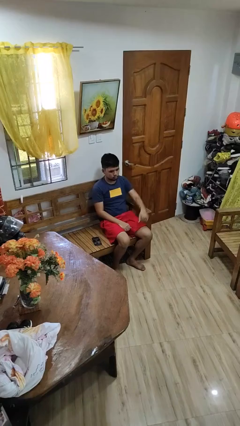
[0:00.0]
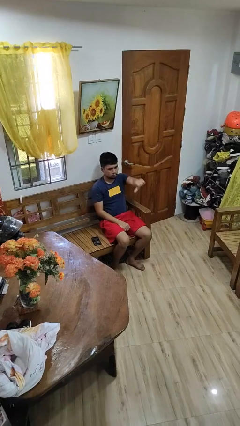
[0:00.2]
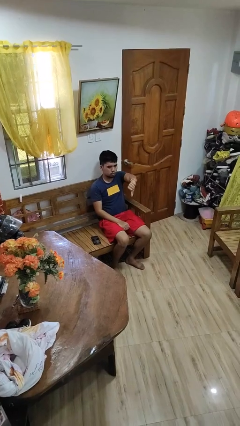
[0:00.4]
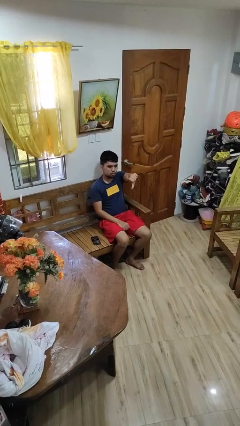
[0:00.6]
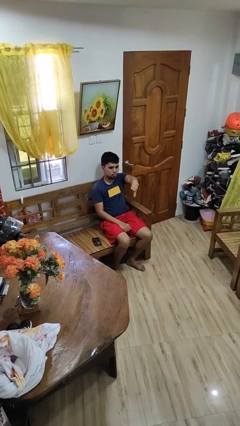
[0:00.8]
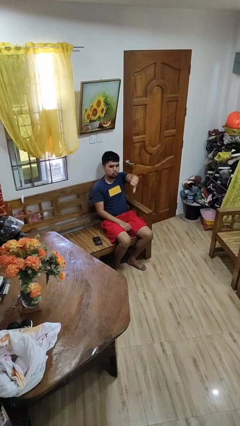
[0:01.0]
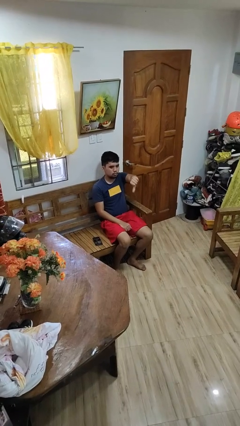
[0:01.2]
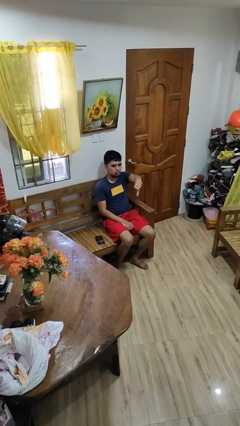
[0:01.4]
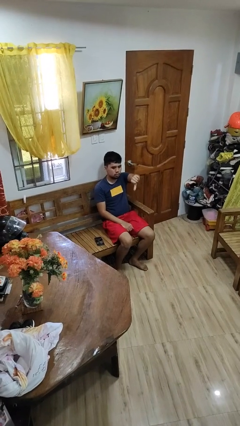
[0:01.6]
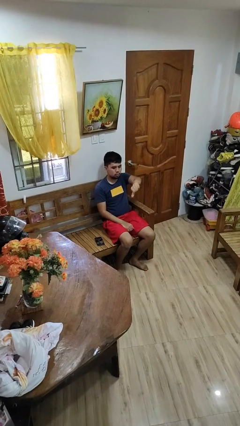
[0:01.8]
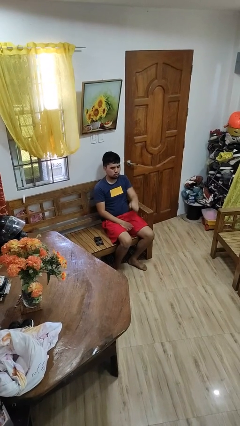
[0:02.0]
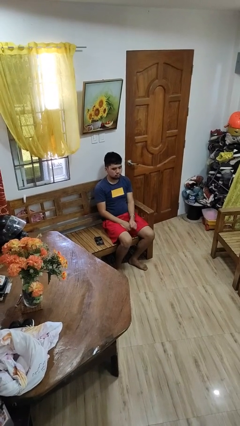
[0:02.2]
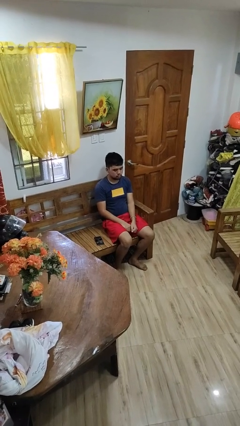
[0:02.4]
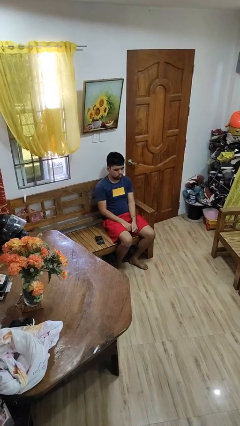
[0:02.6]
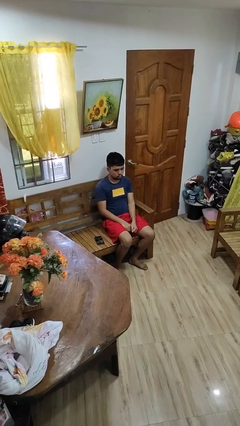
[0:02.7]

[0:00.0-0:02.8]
person gestures thumbs down

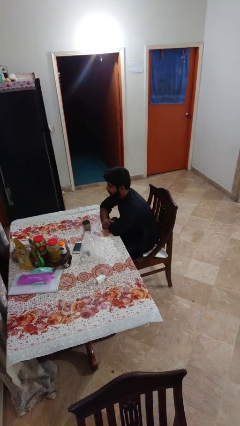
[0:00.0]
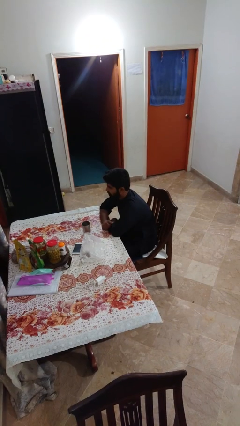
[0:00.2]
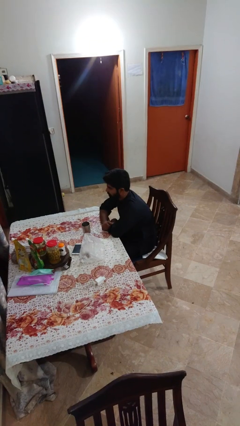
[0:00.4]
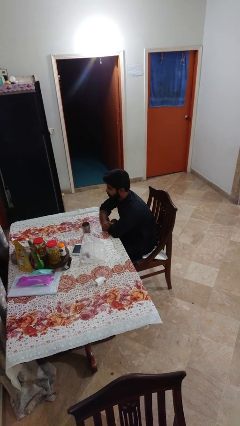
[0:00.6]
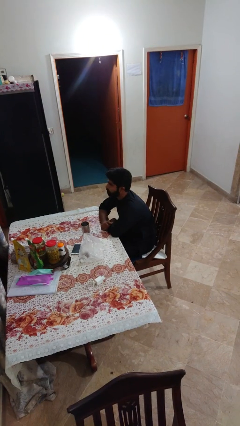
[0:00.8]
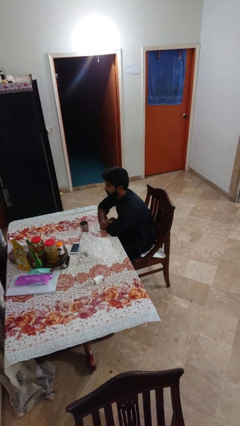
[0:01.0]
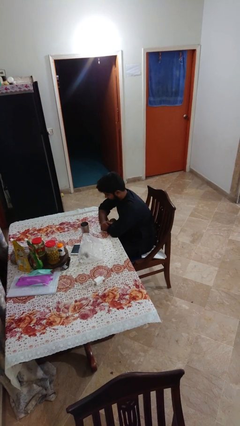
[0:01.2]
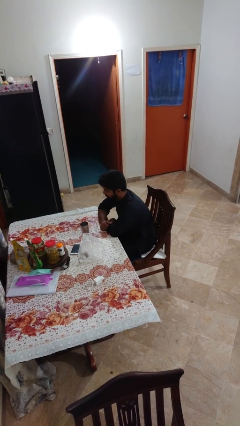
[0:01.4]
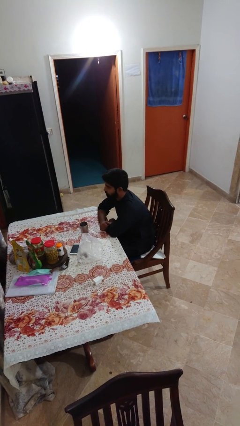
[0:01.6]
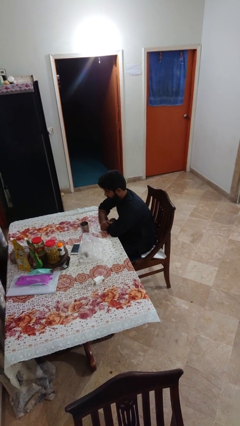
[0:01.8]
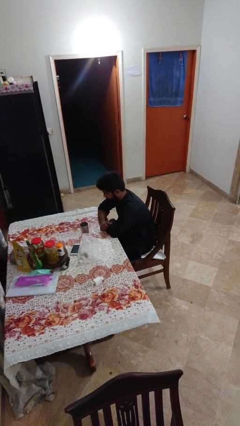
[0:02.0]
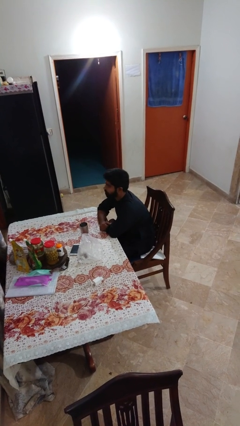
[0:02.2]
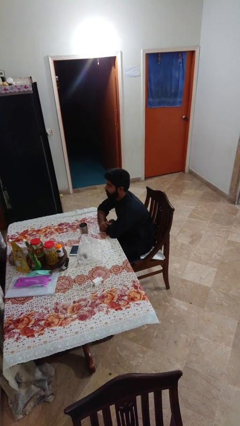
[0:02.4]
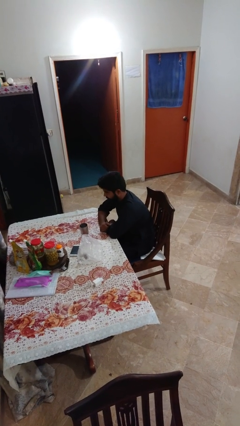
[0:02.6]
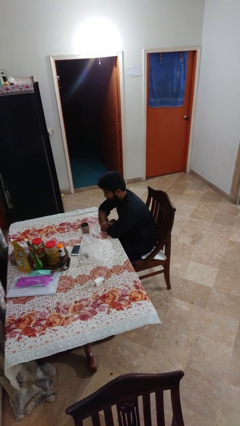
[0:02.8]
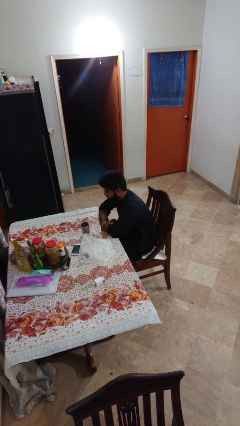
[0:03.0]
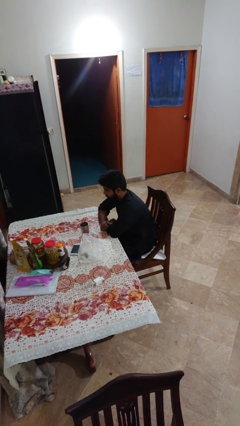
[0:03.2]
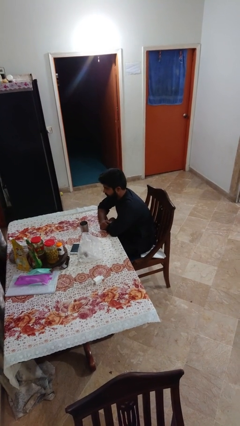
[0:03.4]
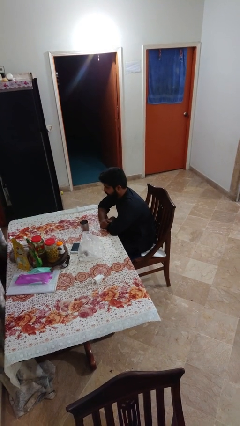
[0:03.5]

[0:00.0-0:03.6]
person nods head

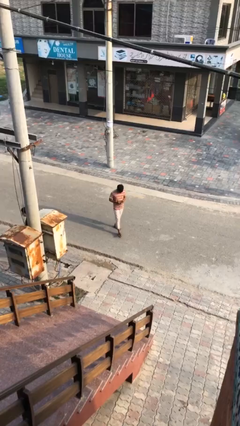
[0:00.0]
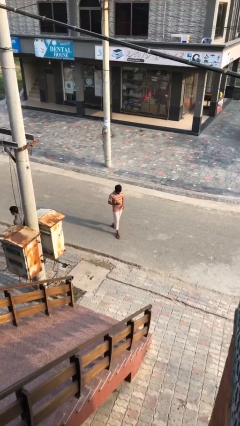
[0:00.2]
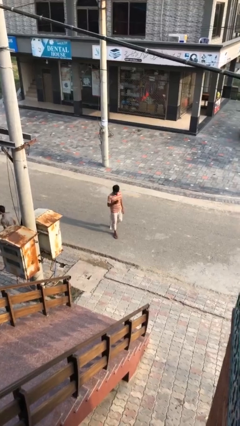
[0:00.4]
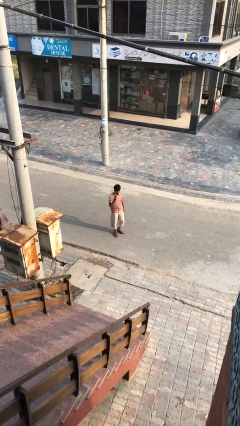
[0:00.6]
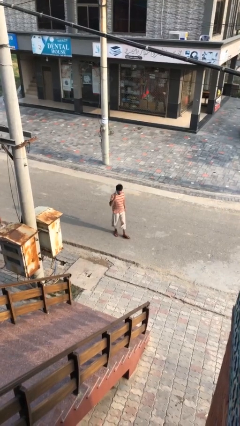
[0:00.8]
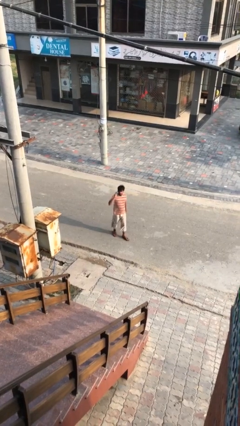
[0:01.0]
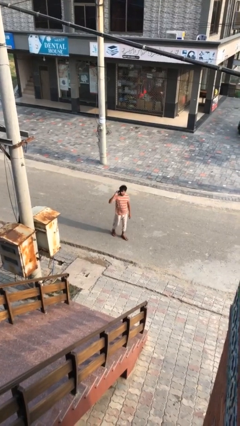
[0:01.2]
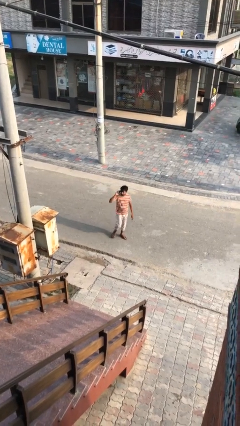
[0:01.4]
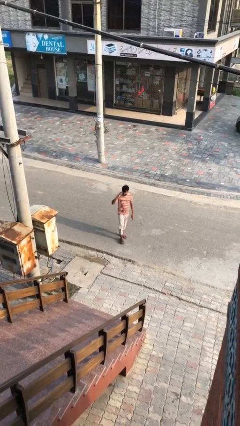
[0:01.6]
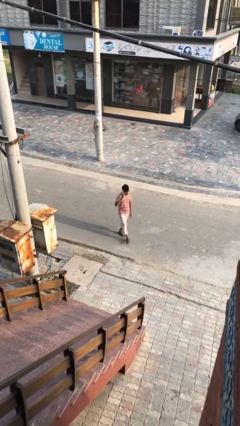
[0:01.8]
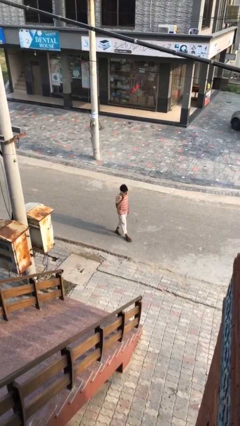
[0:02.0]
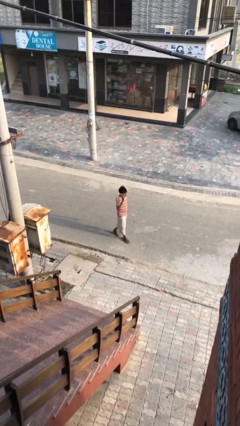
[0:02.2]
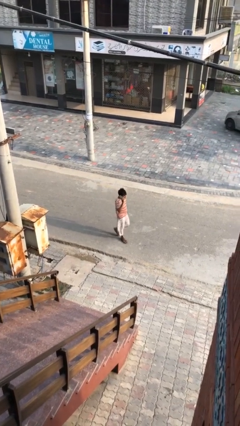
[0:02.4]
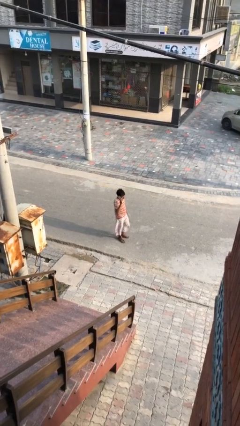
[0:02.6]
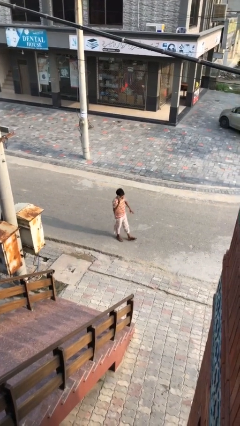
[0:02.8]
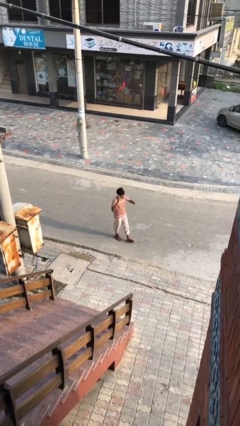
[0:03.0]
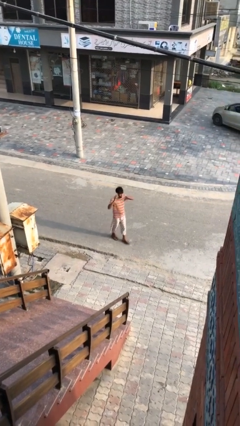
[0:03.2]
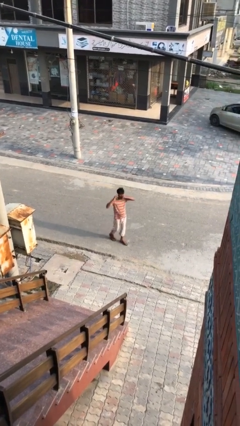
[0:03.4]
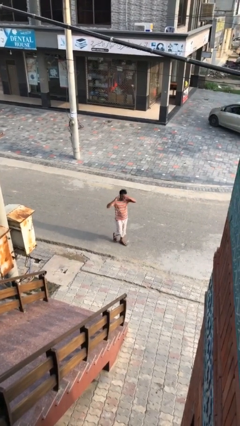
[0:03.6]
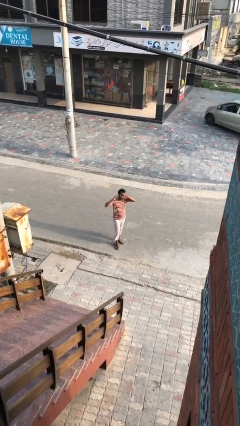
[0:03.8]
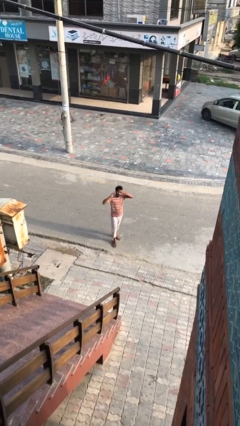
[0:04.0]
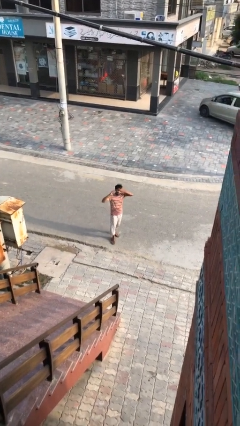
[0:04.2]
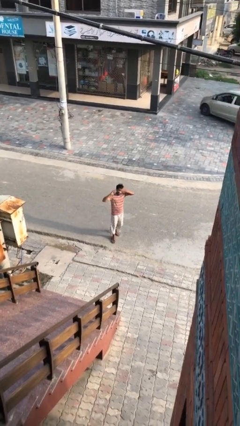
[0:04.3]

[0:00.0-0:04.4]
person talks on phone

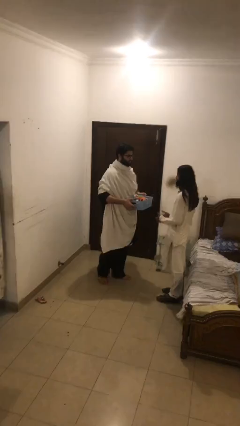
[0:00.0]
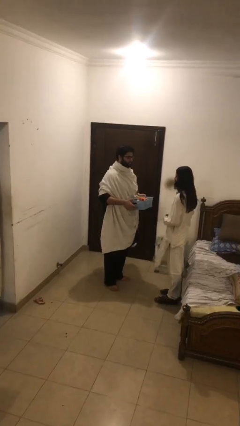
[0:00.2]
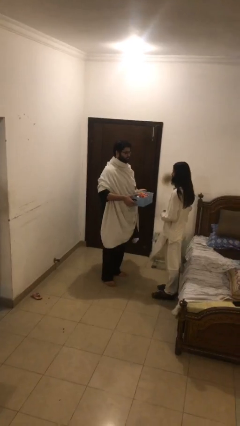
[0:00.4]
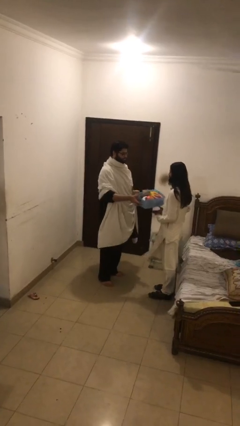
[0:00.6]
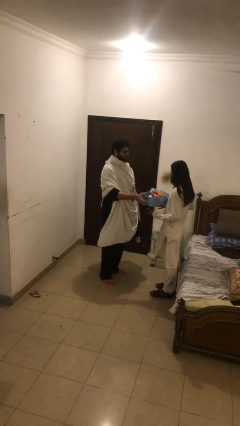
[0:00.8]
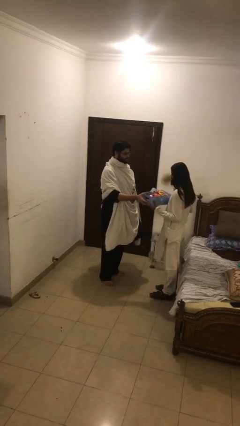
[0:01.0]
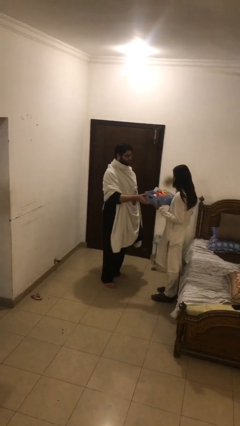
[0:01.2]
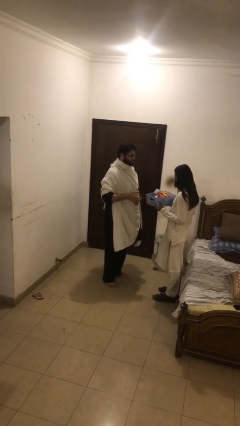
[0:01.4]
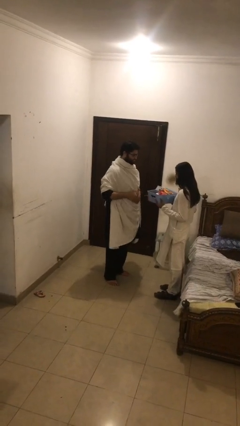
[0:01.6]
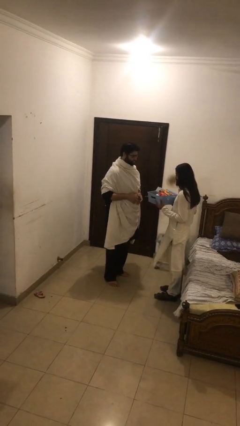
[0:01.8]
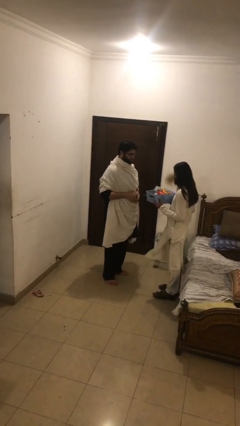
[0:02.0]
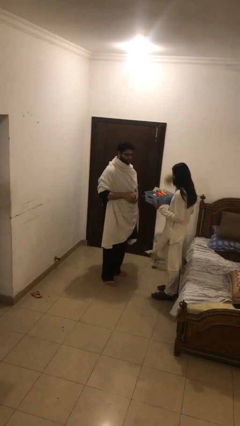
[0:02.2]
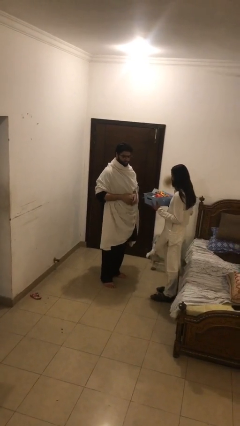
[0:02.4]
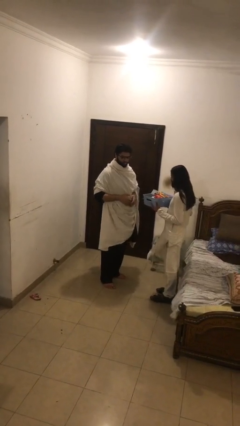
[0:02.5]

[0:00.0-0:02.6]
person transfers object to person

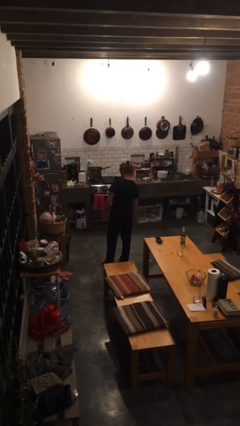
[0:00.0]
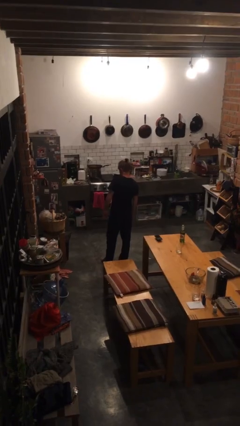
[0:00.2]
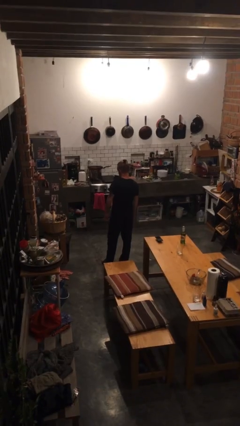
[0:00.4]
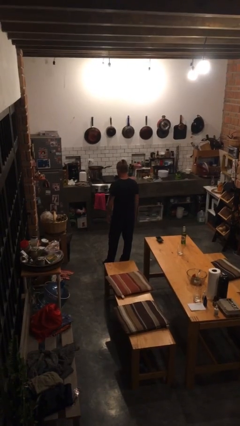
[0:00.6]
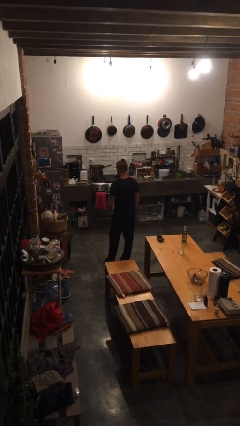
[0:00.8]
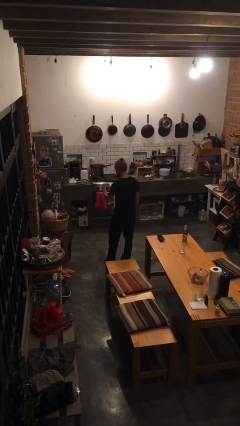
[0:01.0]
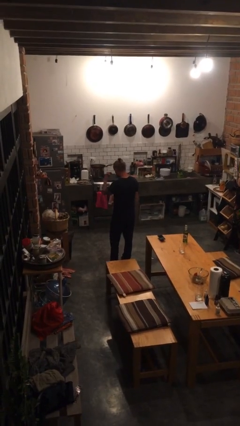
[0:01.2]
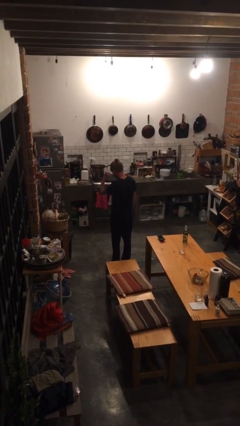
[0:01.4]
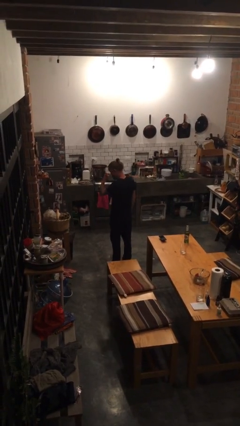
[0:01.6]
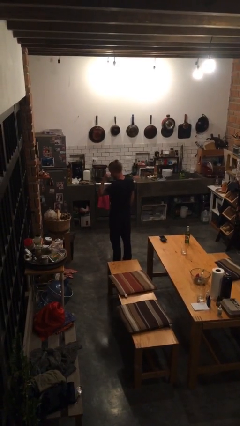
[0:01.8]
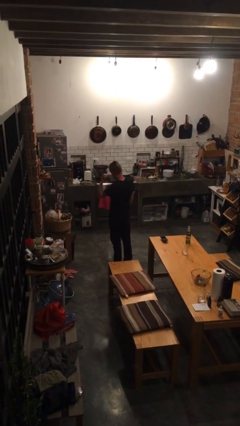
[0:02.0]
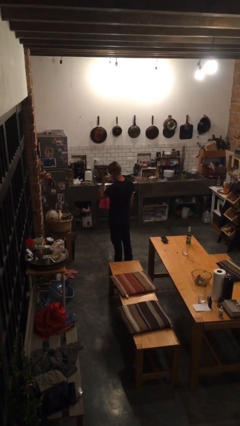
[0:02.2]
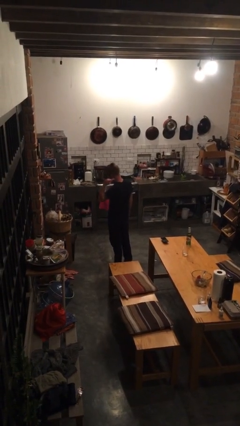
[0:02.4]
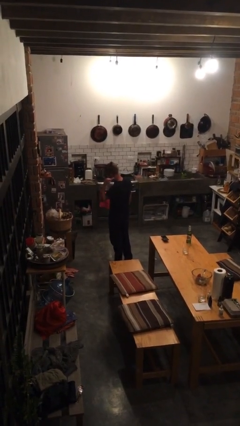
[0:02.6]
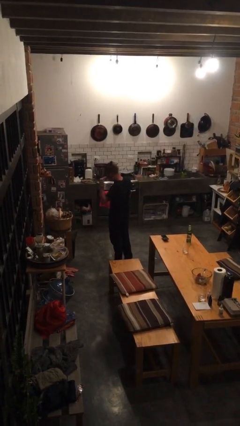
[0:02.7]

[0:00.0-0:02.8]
person gestures behind me

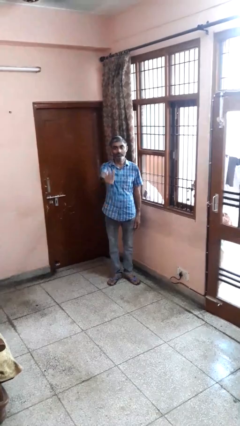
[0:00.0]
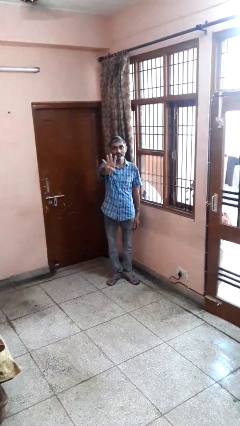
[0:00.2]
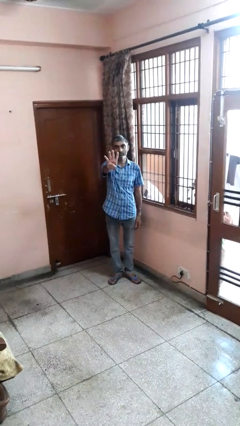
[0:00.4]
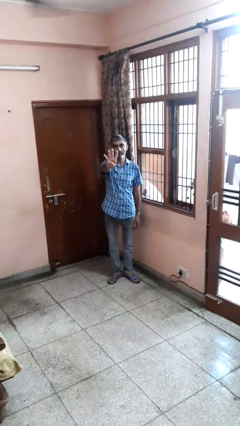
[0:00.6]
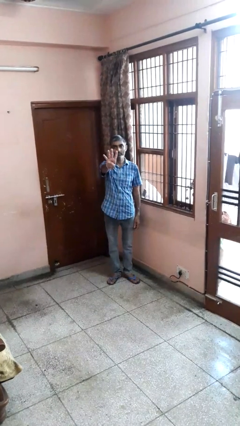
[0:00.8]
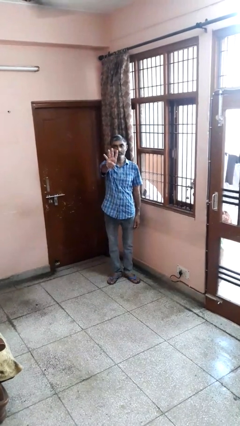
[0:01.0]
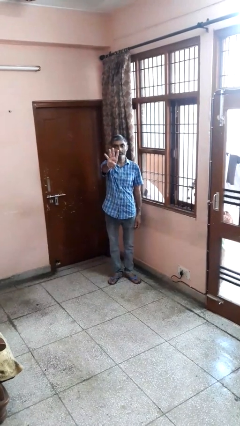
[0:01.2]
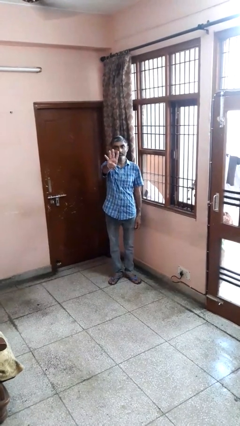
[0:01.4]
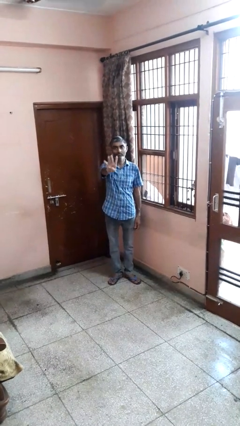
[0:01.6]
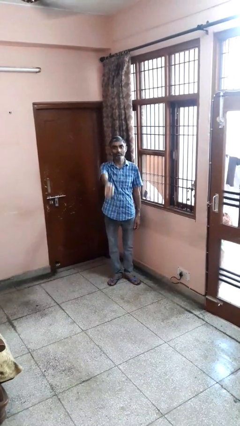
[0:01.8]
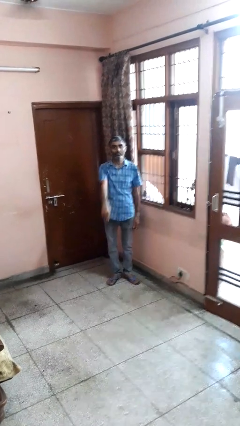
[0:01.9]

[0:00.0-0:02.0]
person gestures number four
